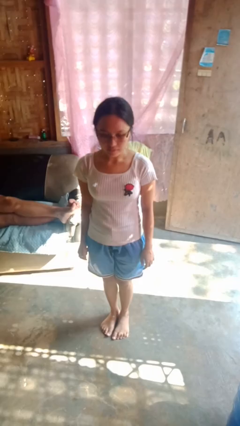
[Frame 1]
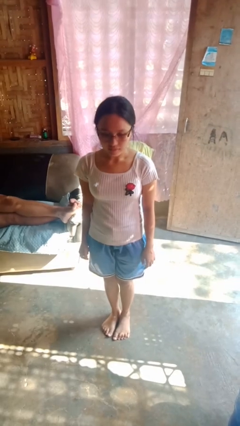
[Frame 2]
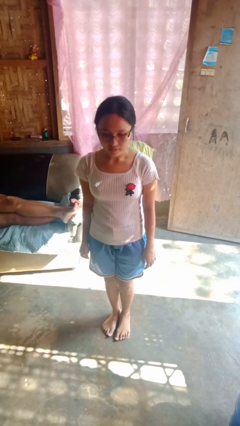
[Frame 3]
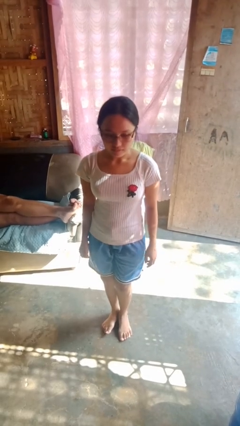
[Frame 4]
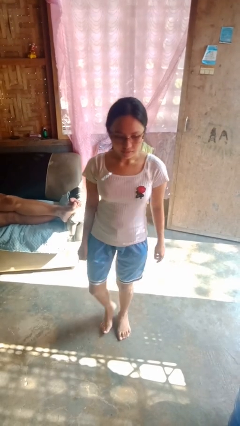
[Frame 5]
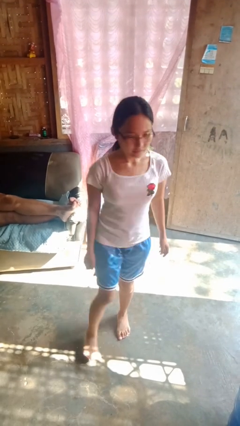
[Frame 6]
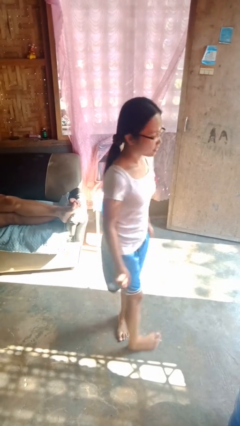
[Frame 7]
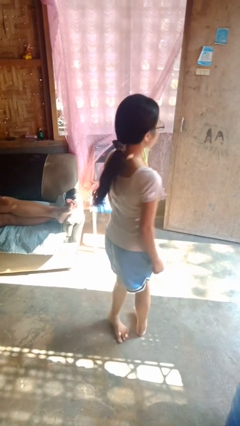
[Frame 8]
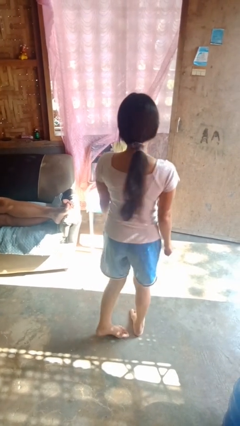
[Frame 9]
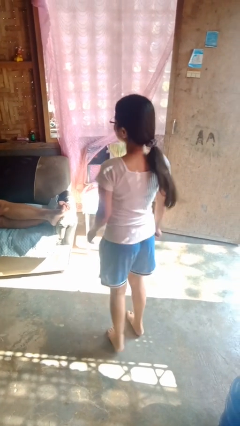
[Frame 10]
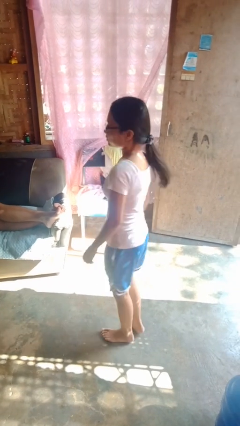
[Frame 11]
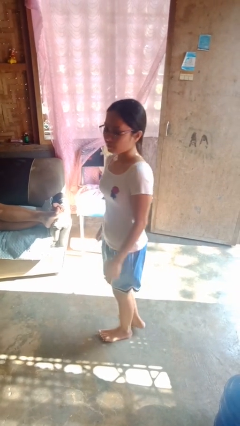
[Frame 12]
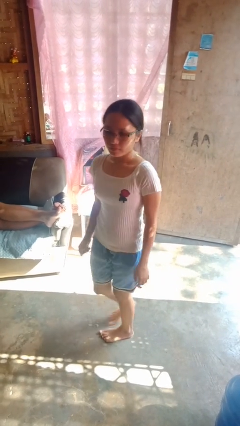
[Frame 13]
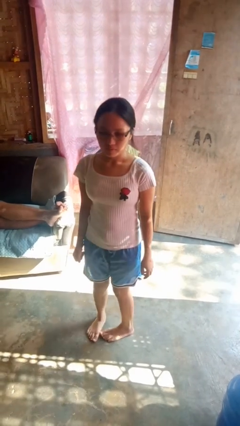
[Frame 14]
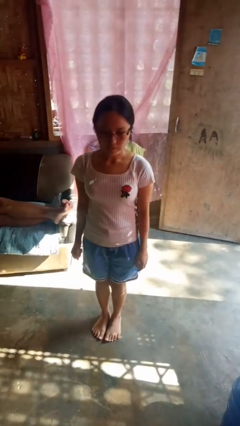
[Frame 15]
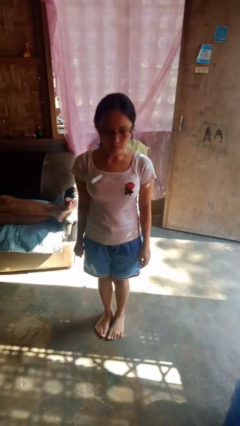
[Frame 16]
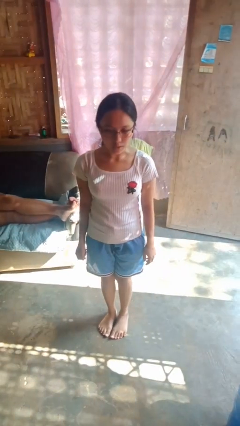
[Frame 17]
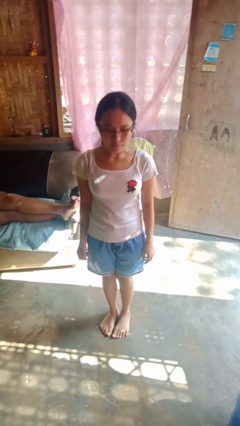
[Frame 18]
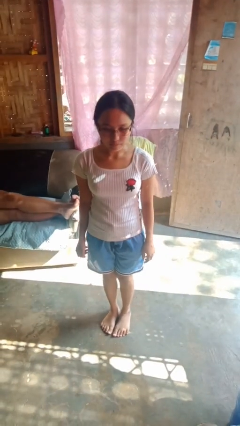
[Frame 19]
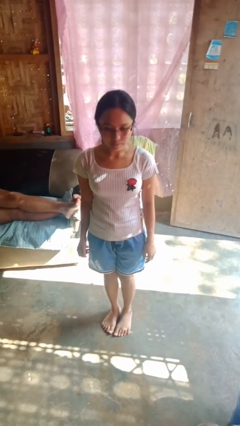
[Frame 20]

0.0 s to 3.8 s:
person twirls

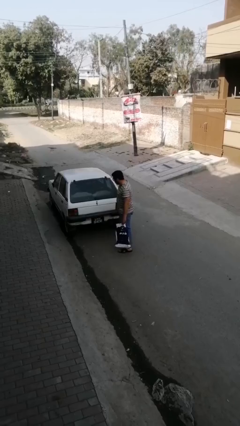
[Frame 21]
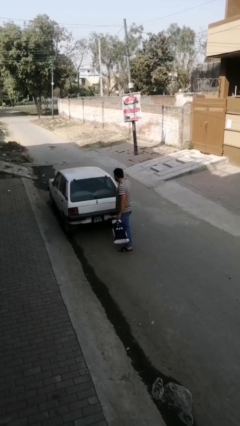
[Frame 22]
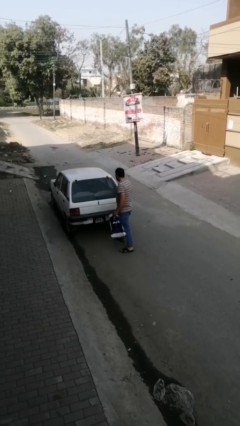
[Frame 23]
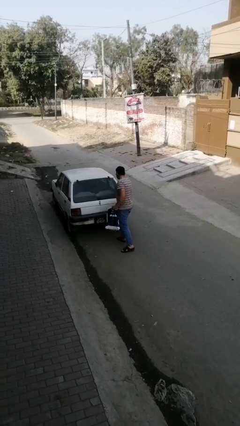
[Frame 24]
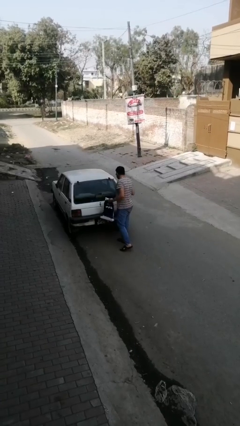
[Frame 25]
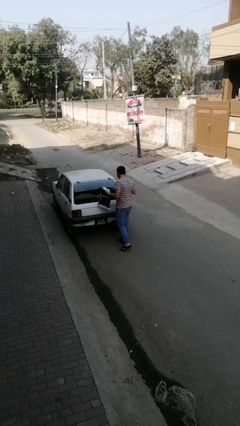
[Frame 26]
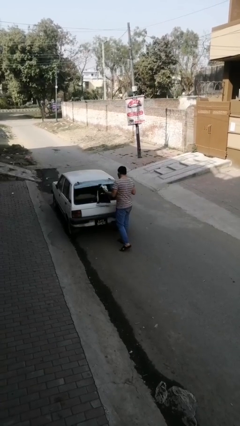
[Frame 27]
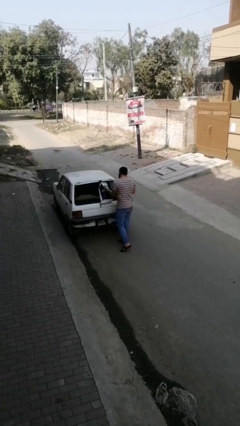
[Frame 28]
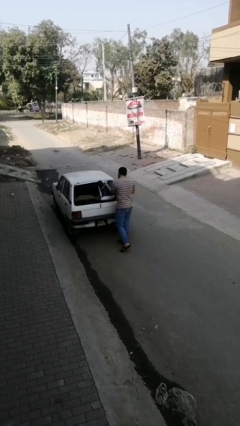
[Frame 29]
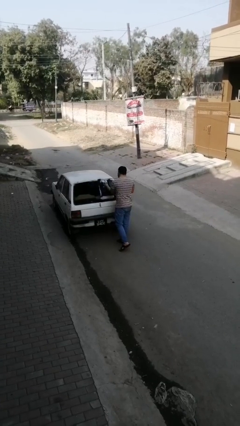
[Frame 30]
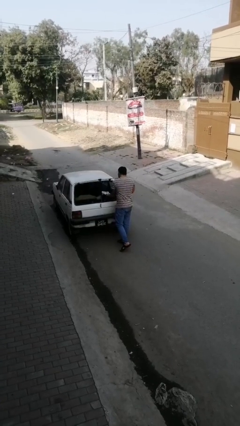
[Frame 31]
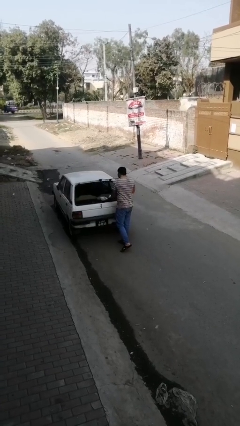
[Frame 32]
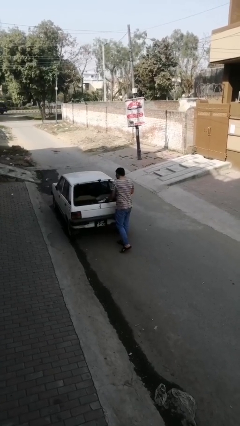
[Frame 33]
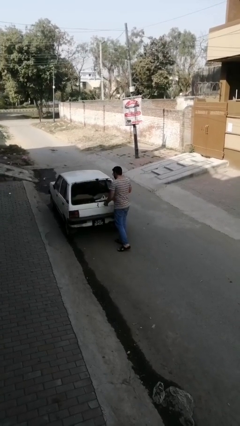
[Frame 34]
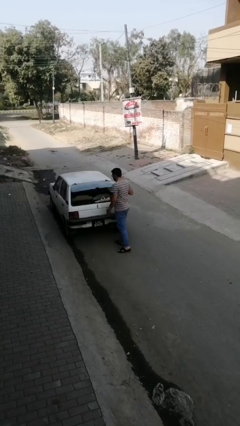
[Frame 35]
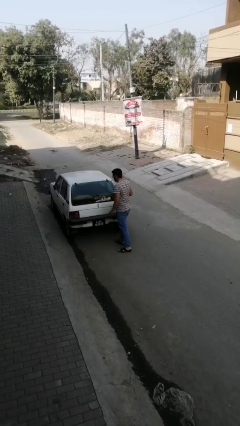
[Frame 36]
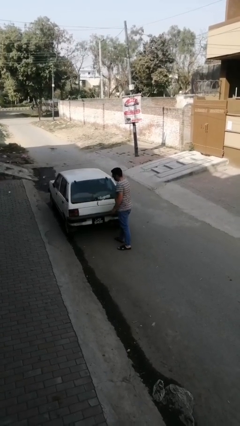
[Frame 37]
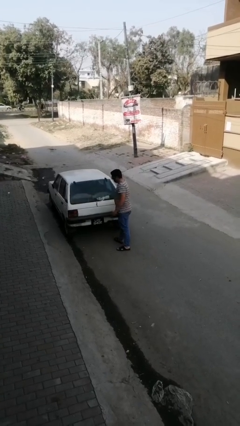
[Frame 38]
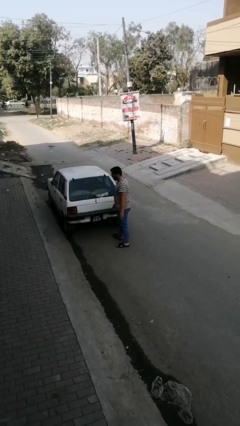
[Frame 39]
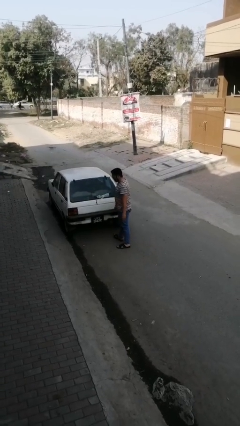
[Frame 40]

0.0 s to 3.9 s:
person loads car

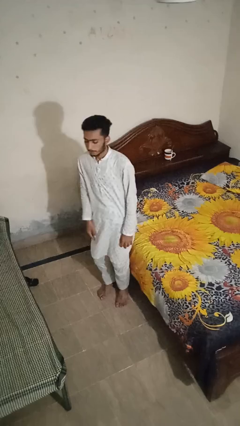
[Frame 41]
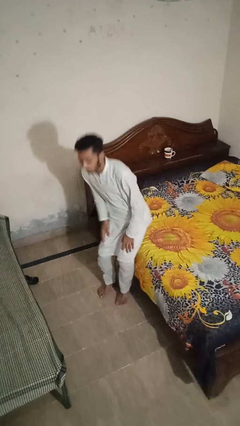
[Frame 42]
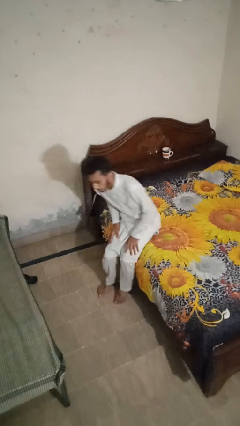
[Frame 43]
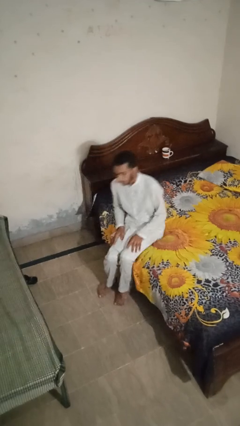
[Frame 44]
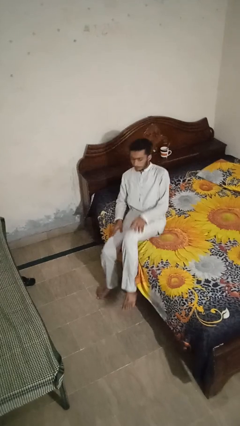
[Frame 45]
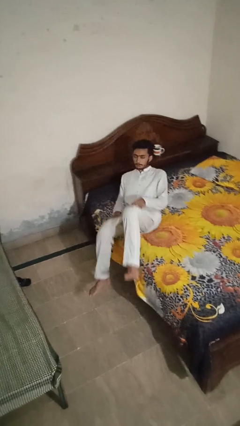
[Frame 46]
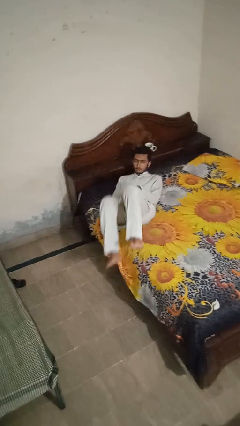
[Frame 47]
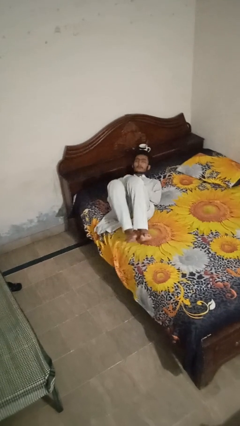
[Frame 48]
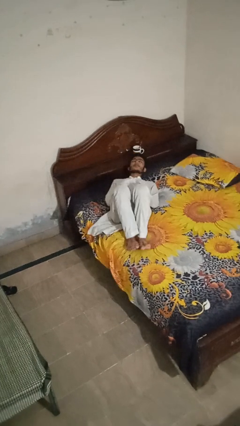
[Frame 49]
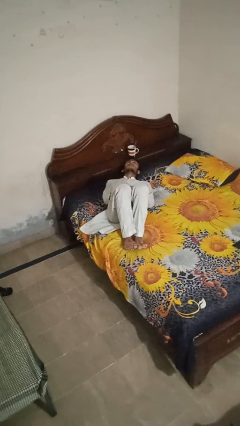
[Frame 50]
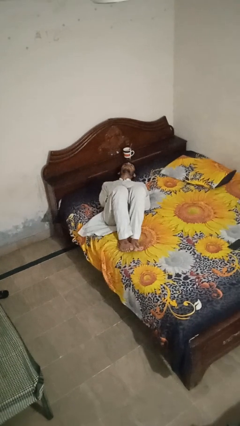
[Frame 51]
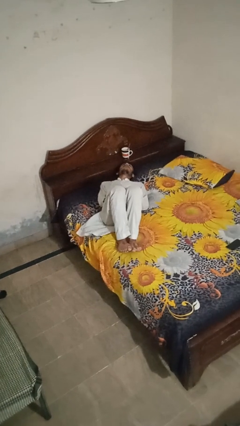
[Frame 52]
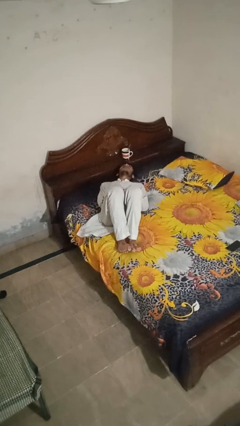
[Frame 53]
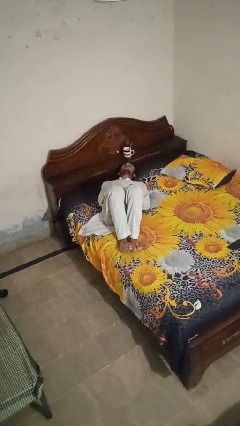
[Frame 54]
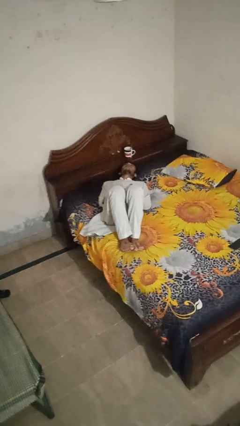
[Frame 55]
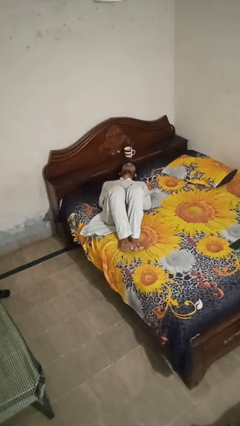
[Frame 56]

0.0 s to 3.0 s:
person lies down on bed

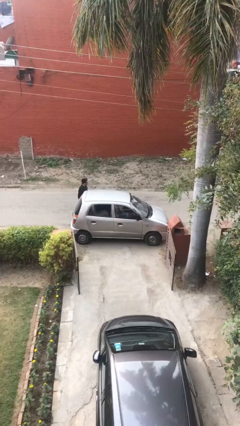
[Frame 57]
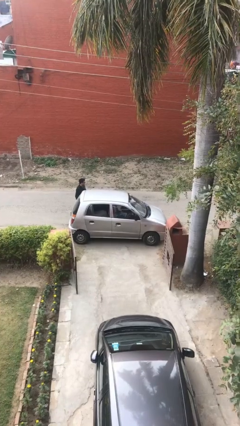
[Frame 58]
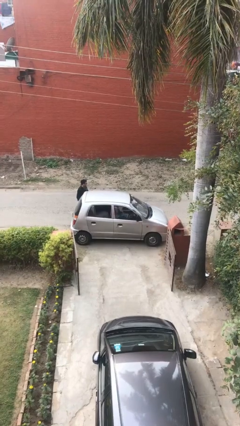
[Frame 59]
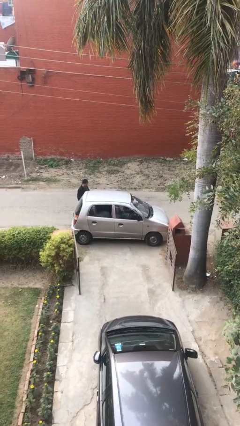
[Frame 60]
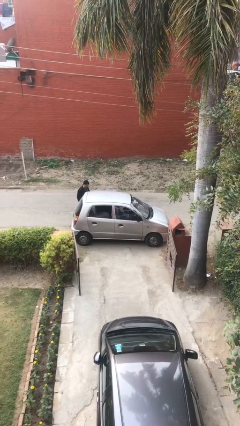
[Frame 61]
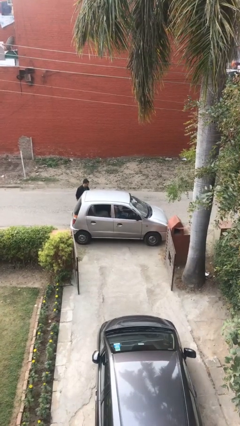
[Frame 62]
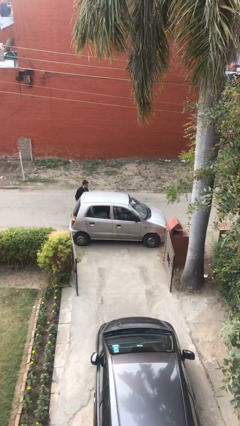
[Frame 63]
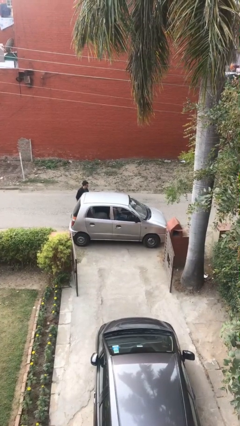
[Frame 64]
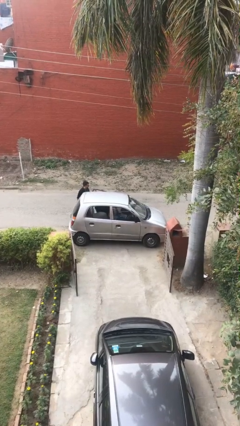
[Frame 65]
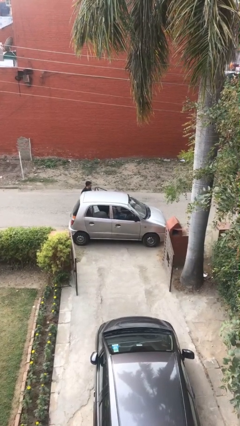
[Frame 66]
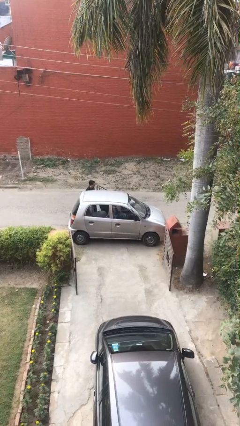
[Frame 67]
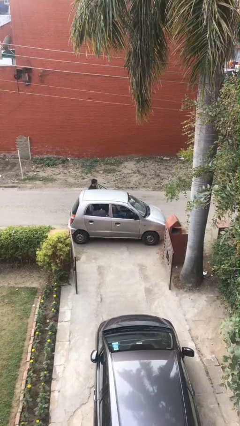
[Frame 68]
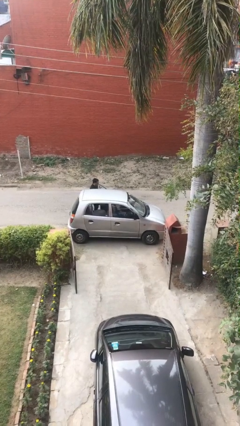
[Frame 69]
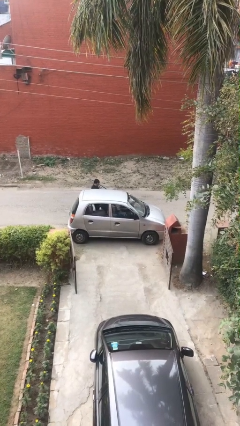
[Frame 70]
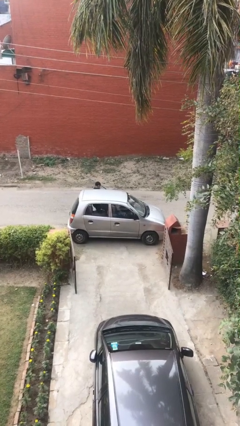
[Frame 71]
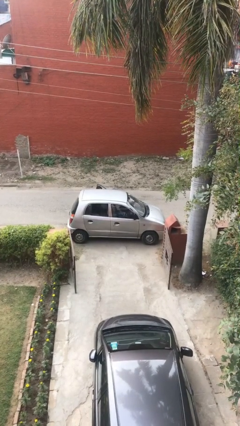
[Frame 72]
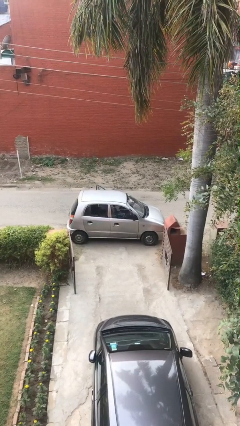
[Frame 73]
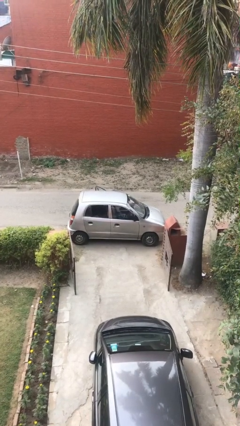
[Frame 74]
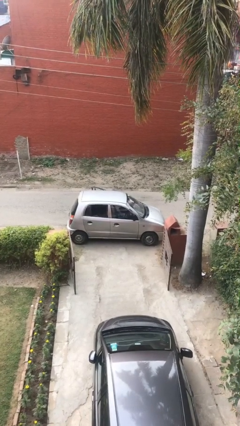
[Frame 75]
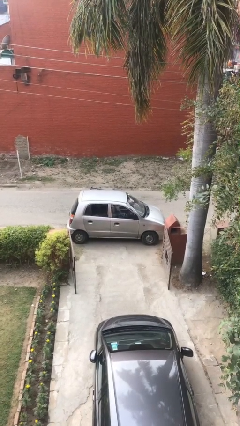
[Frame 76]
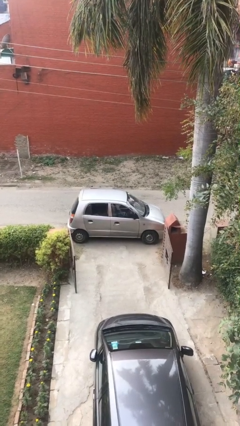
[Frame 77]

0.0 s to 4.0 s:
car picks up person

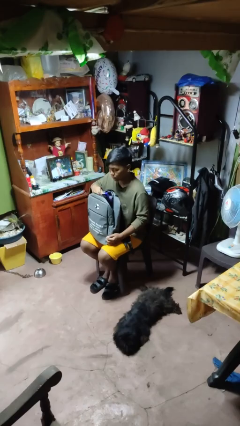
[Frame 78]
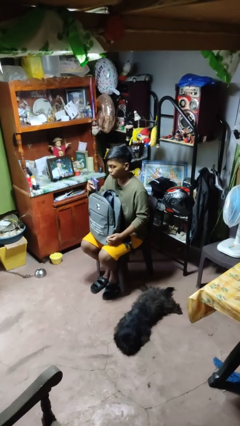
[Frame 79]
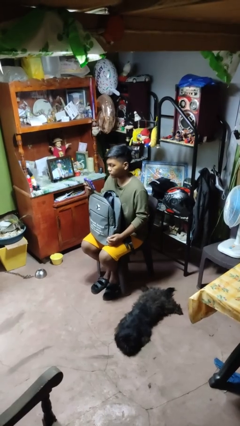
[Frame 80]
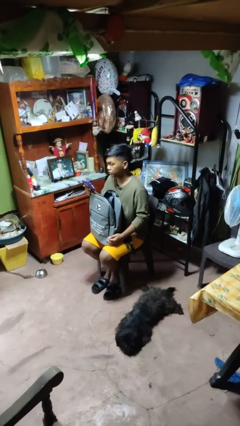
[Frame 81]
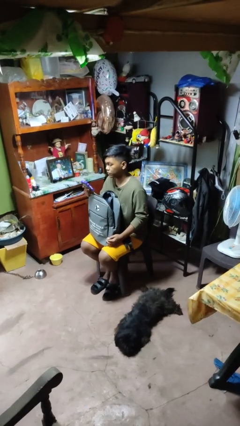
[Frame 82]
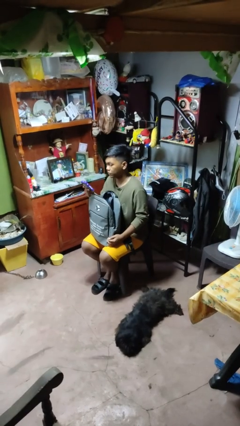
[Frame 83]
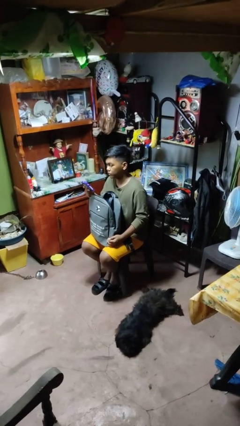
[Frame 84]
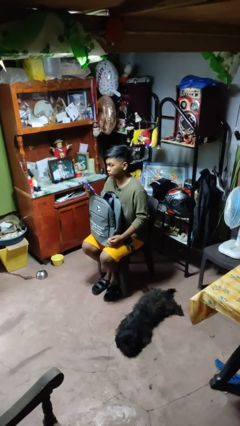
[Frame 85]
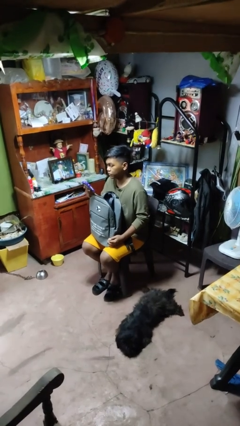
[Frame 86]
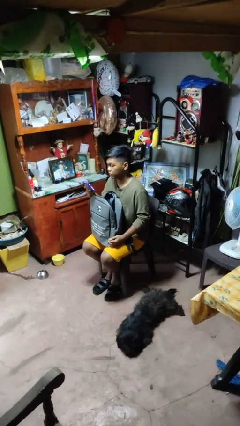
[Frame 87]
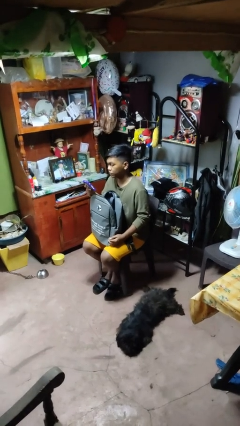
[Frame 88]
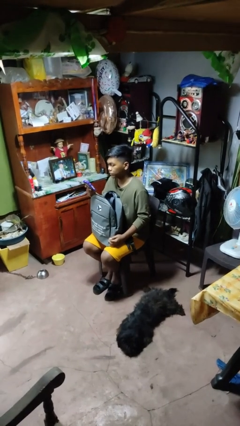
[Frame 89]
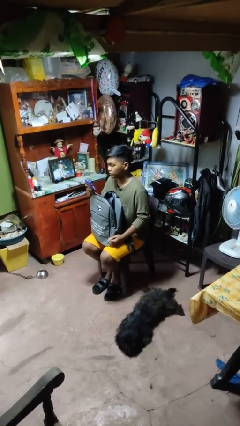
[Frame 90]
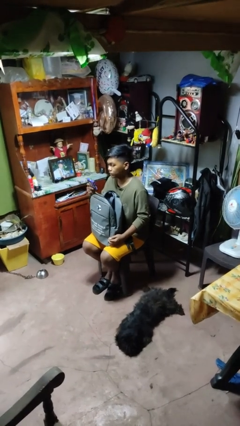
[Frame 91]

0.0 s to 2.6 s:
person takes object from backpack
